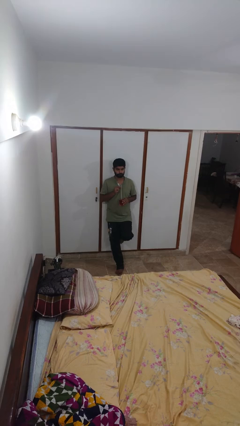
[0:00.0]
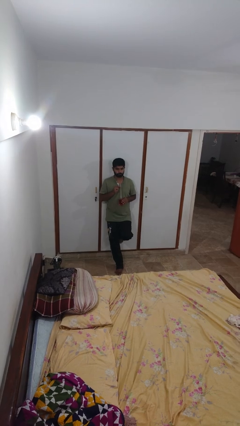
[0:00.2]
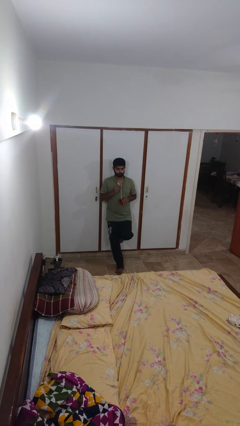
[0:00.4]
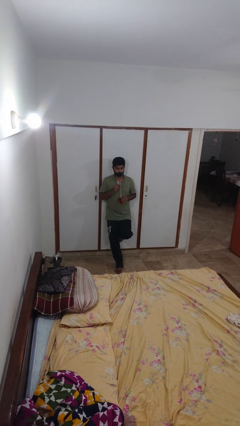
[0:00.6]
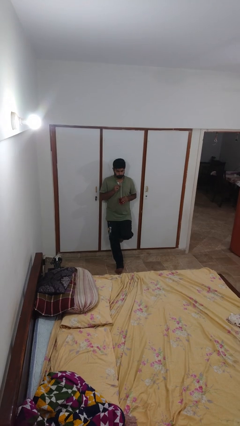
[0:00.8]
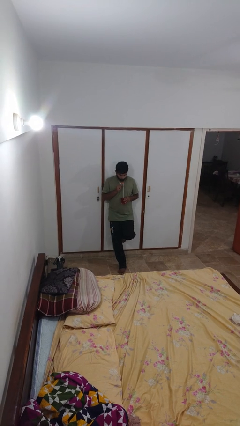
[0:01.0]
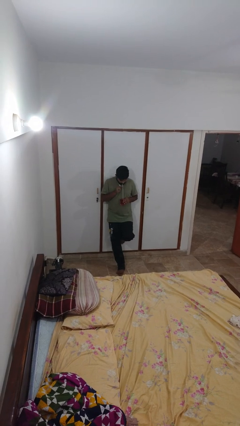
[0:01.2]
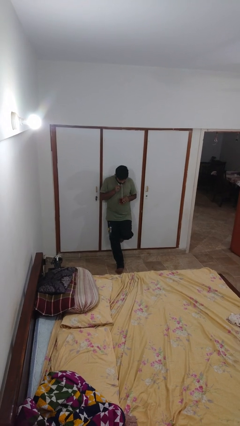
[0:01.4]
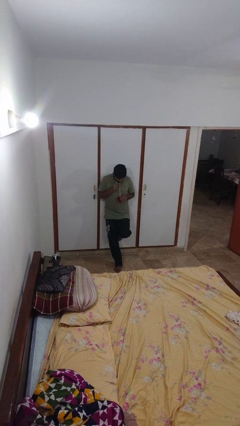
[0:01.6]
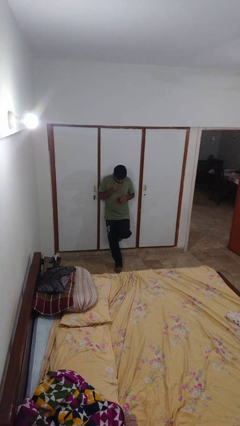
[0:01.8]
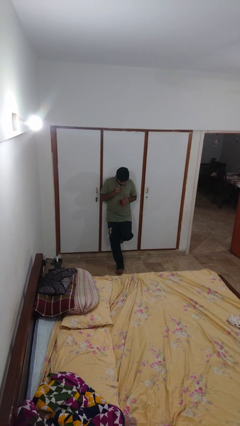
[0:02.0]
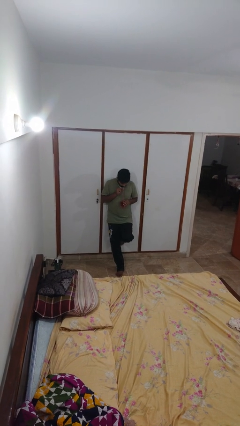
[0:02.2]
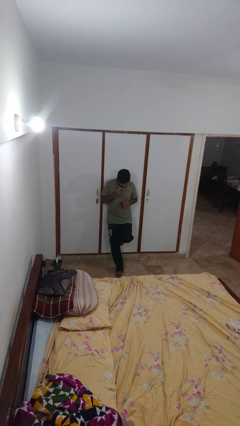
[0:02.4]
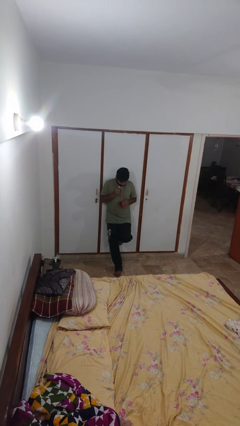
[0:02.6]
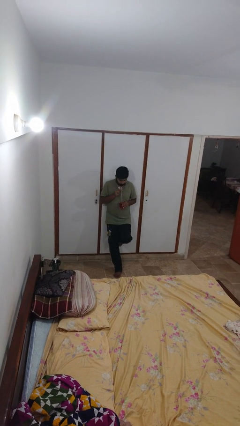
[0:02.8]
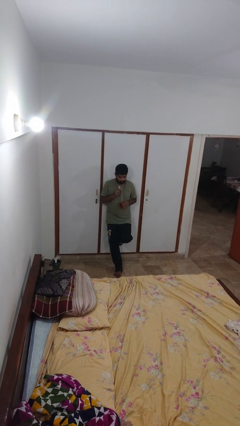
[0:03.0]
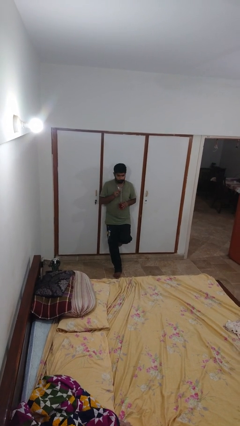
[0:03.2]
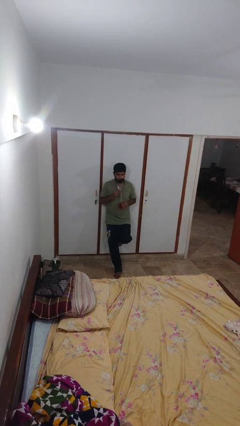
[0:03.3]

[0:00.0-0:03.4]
person drinks from straw

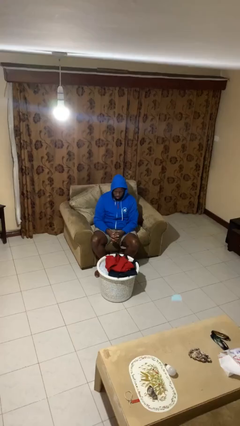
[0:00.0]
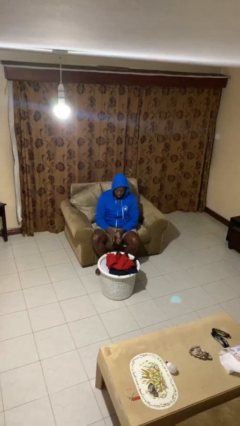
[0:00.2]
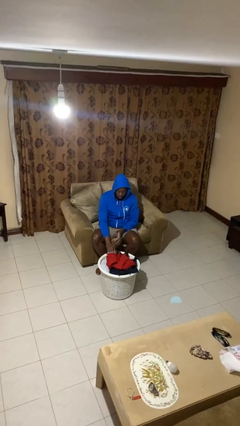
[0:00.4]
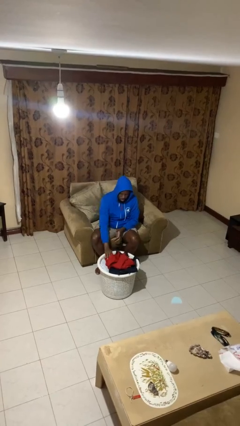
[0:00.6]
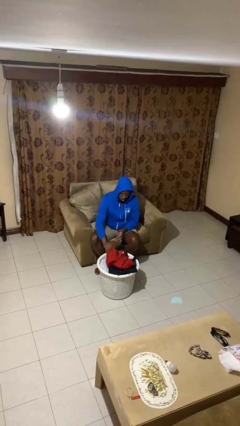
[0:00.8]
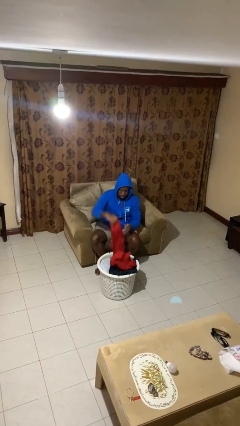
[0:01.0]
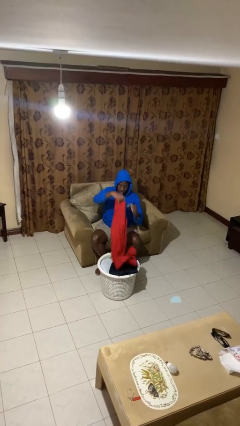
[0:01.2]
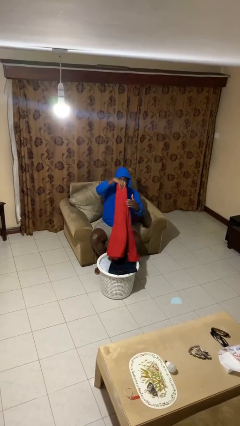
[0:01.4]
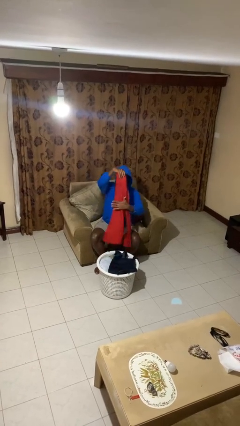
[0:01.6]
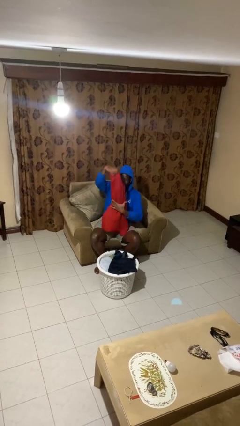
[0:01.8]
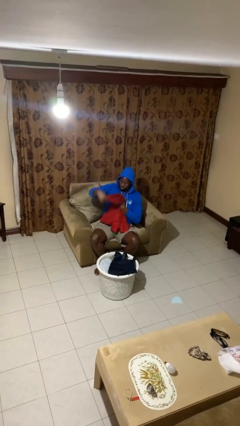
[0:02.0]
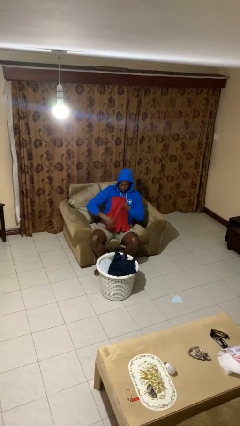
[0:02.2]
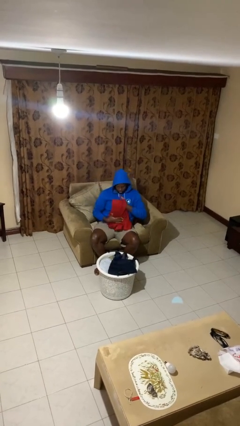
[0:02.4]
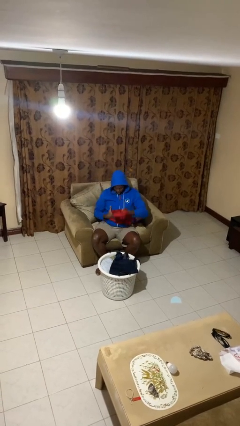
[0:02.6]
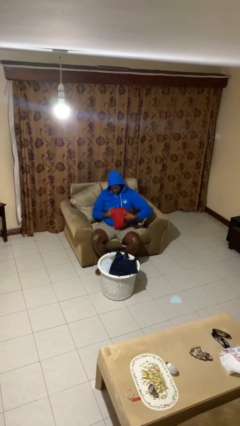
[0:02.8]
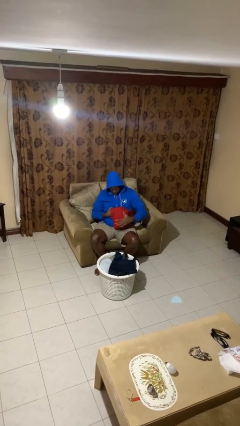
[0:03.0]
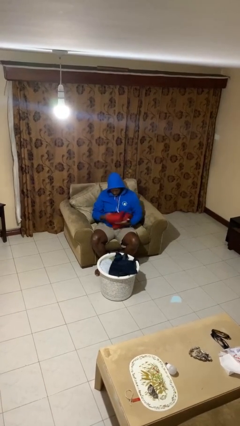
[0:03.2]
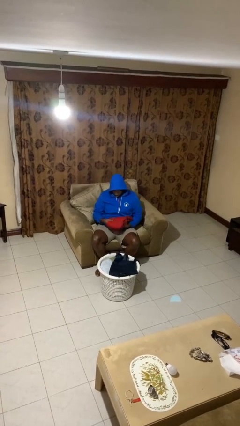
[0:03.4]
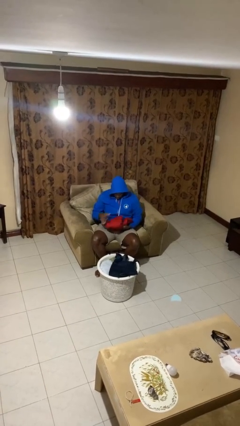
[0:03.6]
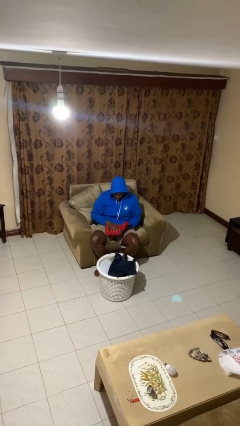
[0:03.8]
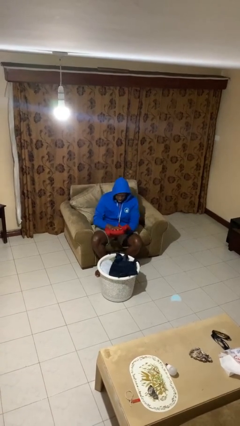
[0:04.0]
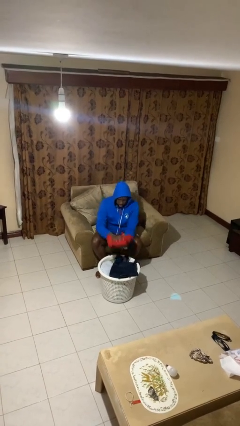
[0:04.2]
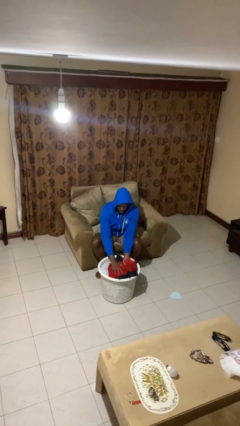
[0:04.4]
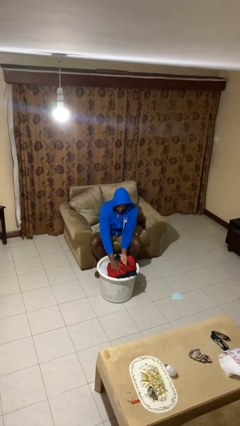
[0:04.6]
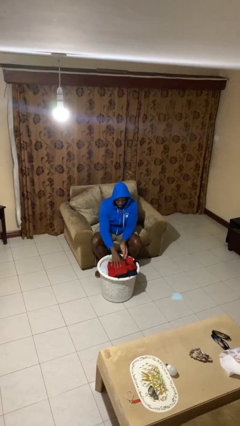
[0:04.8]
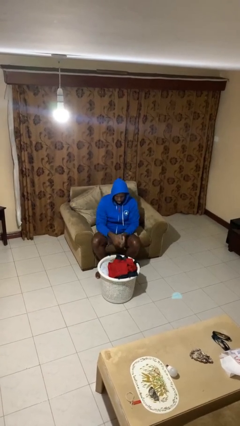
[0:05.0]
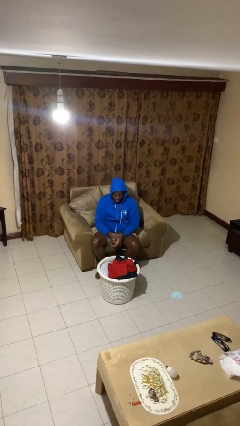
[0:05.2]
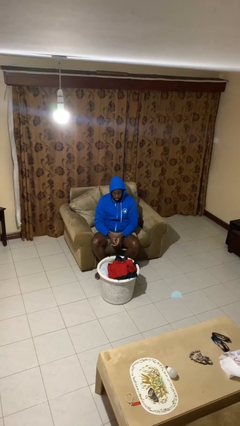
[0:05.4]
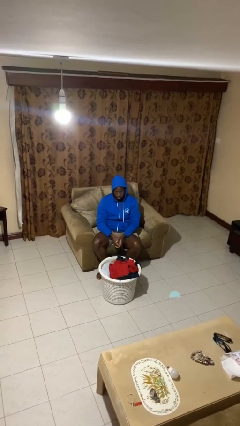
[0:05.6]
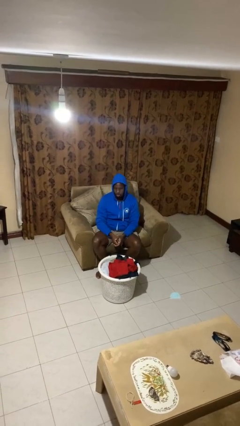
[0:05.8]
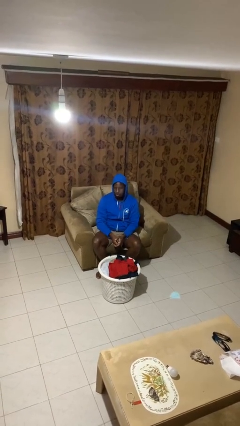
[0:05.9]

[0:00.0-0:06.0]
person folds shirt

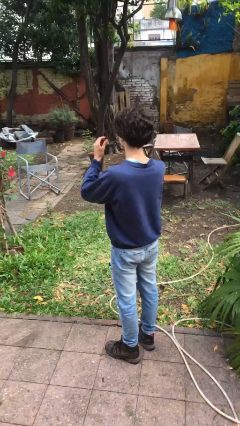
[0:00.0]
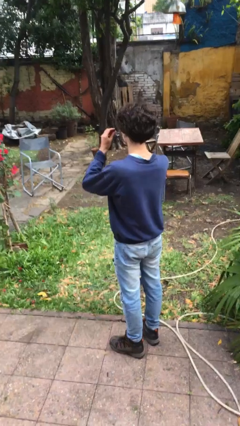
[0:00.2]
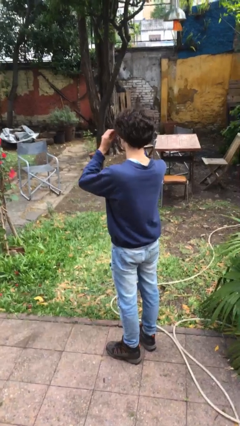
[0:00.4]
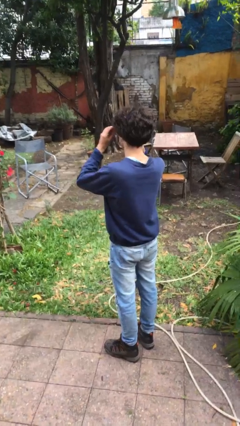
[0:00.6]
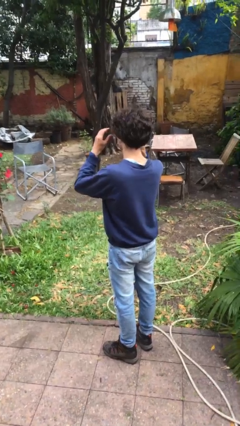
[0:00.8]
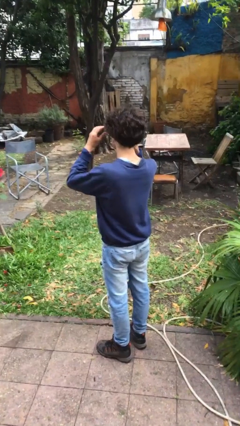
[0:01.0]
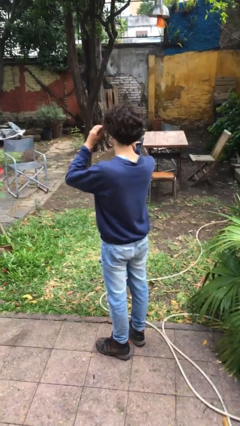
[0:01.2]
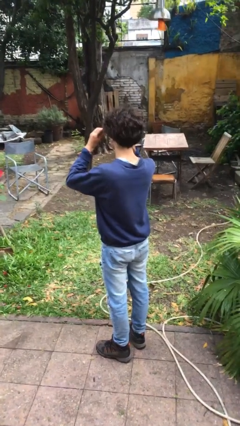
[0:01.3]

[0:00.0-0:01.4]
person puts on glasses

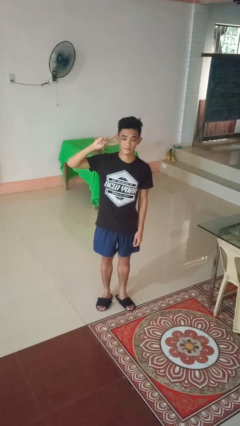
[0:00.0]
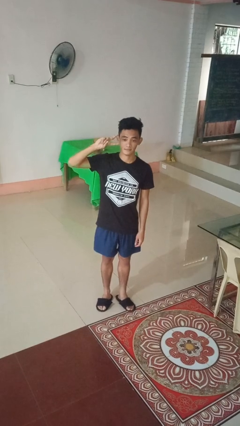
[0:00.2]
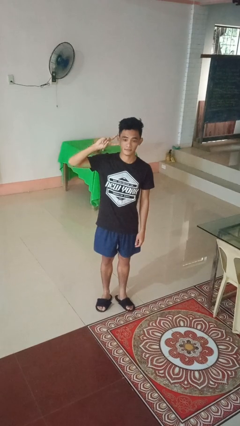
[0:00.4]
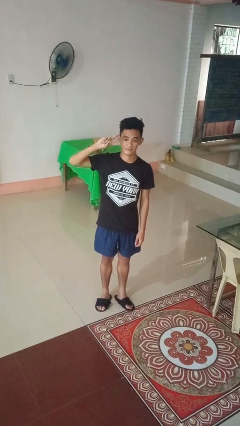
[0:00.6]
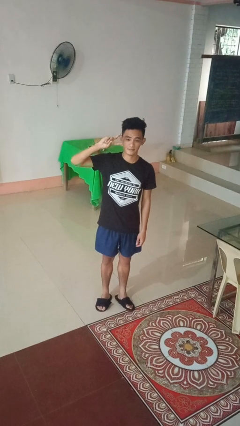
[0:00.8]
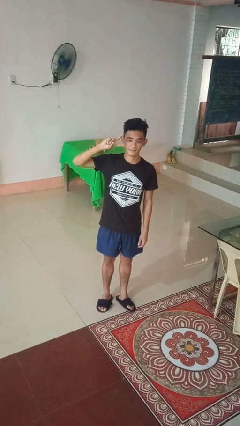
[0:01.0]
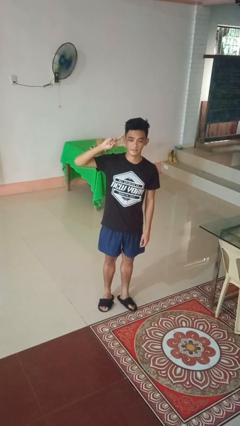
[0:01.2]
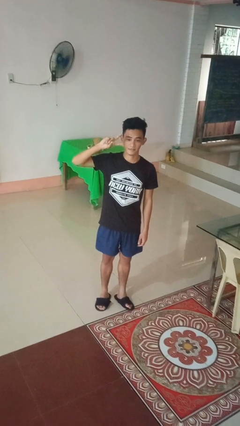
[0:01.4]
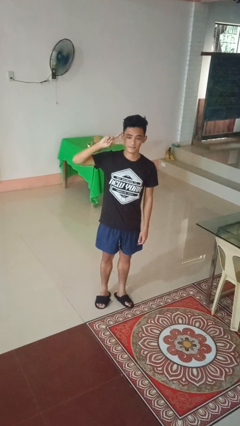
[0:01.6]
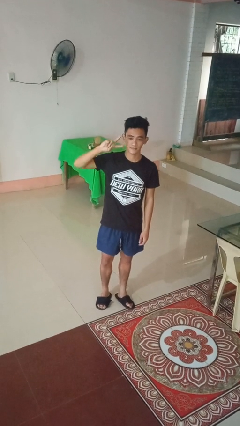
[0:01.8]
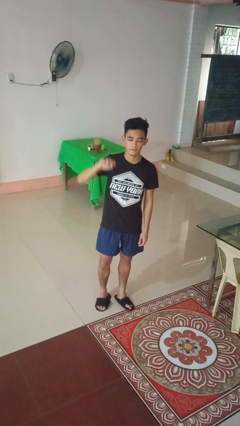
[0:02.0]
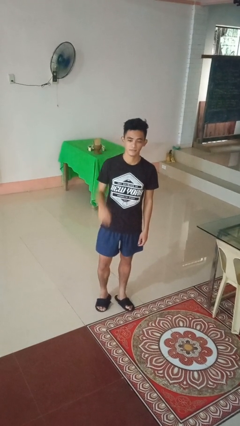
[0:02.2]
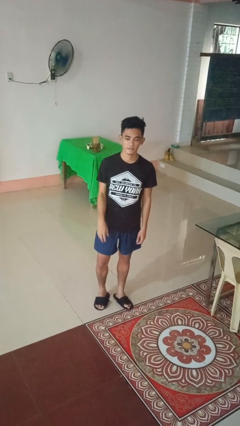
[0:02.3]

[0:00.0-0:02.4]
person gestures peace

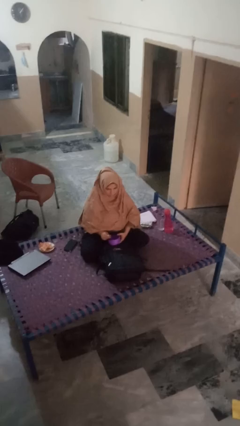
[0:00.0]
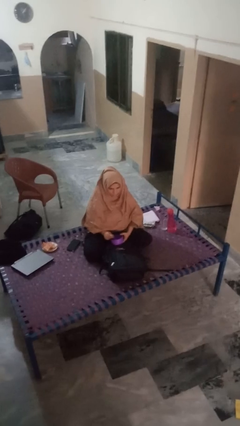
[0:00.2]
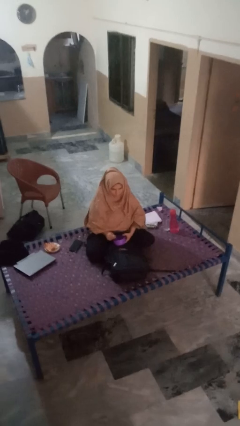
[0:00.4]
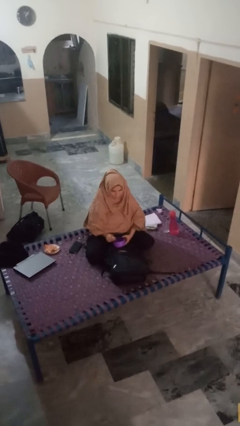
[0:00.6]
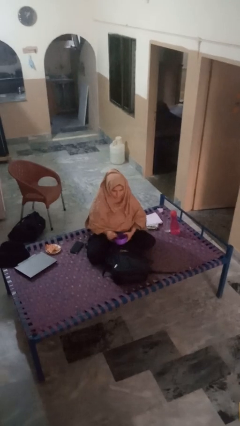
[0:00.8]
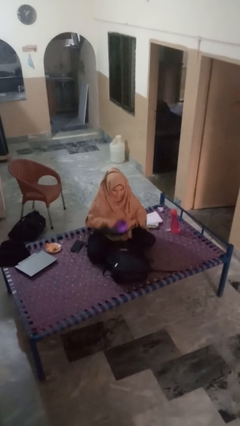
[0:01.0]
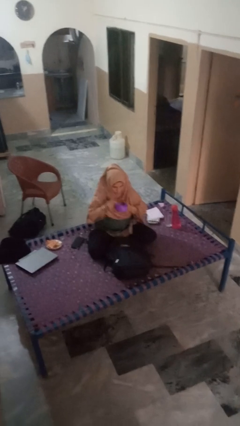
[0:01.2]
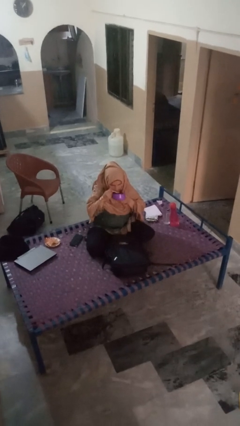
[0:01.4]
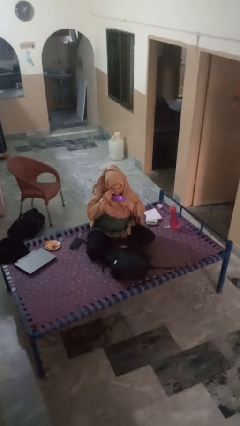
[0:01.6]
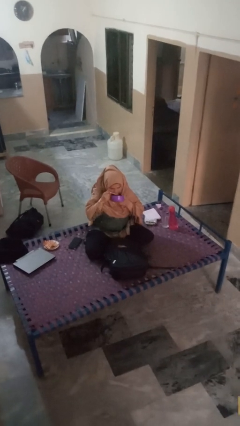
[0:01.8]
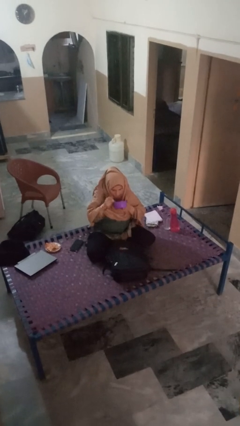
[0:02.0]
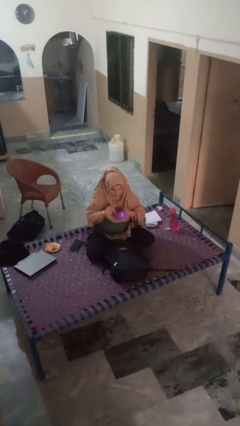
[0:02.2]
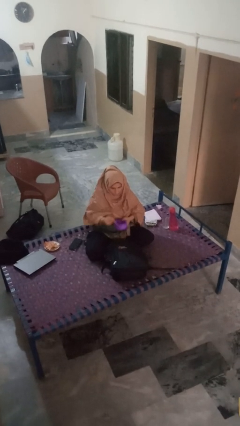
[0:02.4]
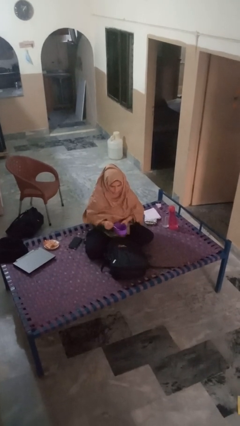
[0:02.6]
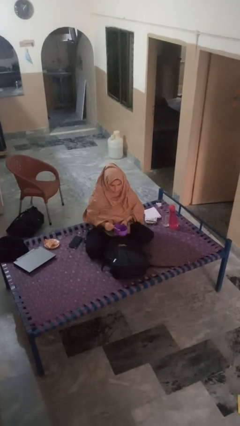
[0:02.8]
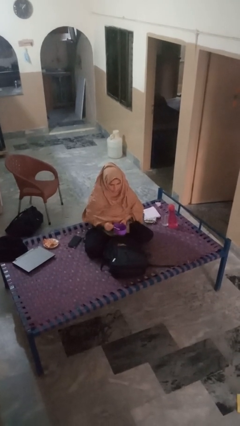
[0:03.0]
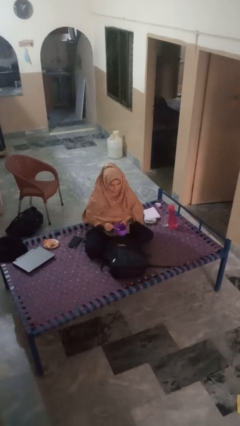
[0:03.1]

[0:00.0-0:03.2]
person eats snack from bag

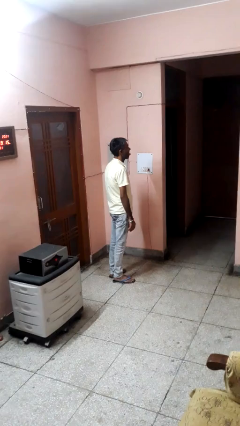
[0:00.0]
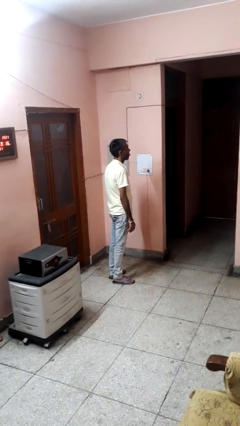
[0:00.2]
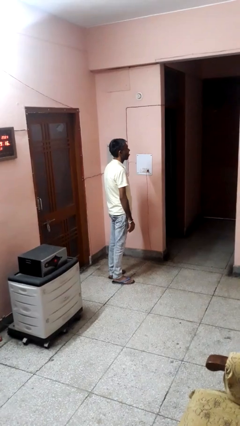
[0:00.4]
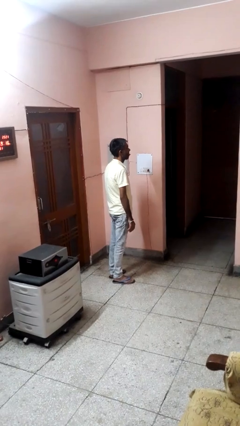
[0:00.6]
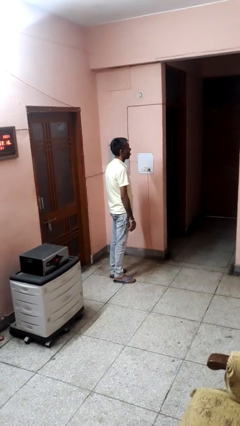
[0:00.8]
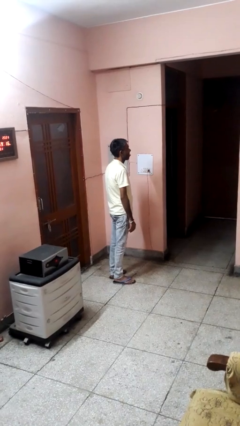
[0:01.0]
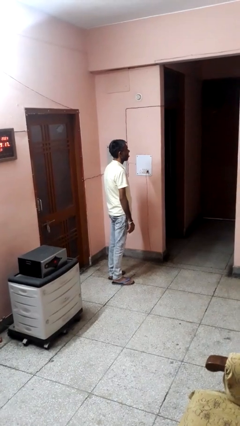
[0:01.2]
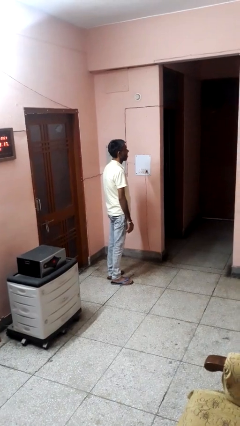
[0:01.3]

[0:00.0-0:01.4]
person sticks out tongue
